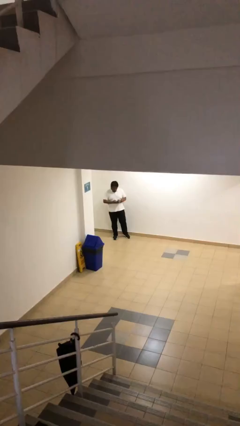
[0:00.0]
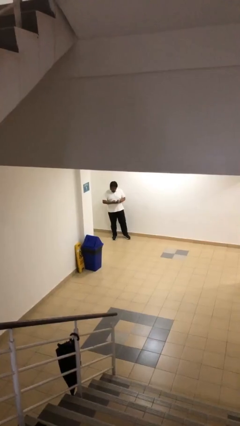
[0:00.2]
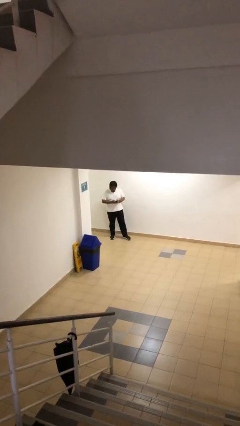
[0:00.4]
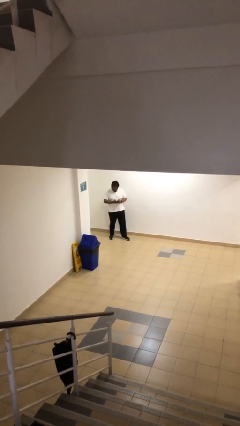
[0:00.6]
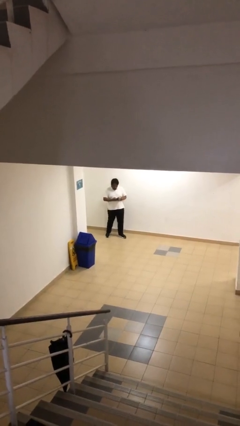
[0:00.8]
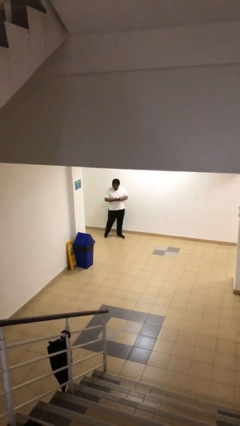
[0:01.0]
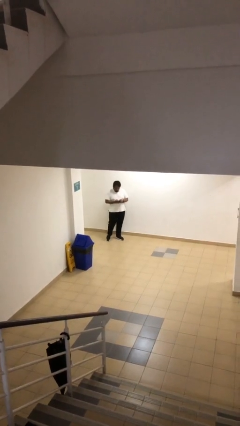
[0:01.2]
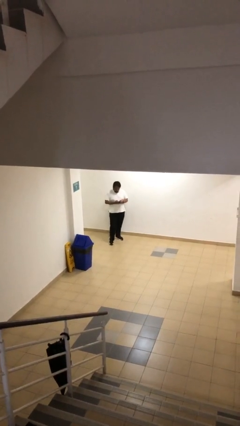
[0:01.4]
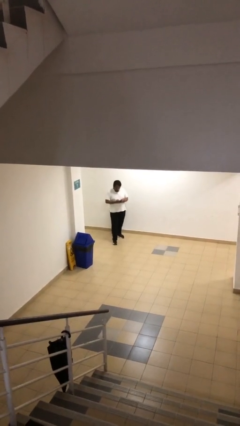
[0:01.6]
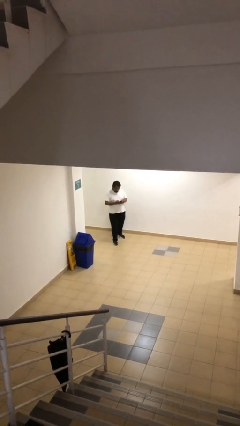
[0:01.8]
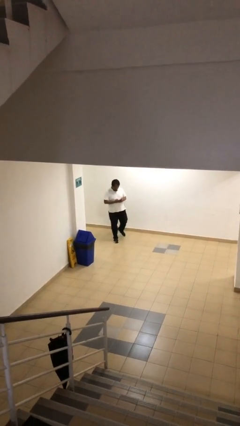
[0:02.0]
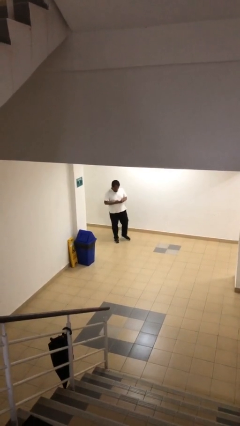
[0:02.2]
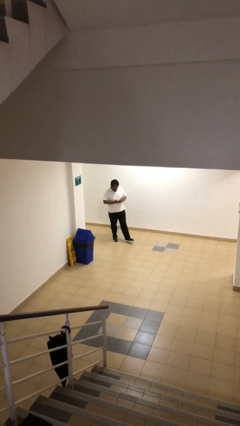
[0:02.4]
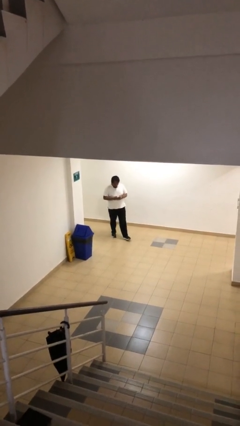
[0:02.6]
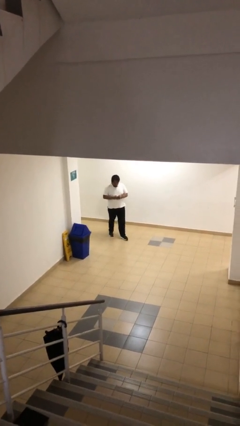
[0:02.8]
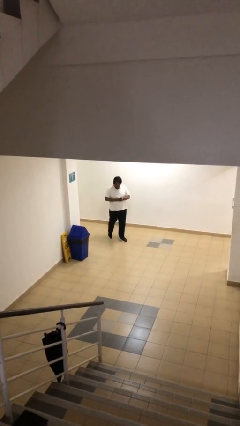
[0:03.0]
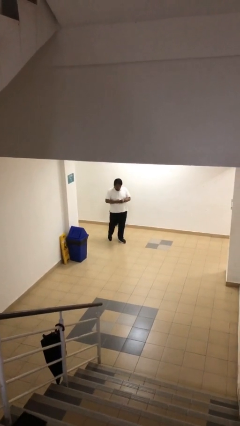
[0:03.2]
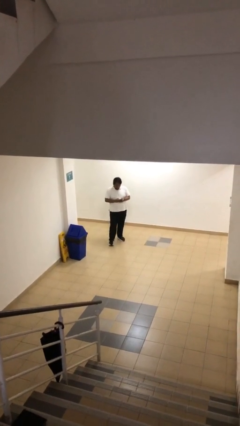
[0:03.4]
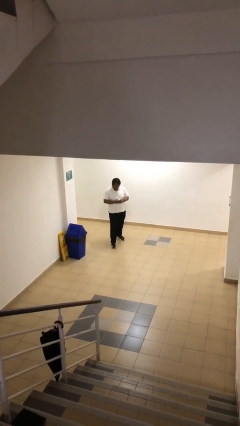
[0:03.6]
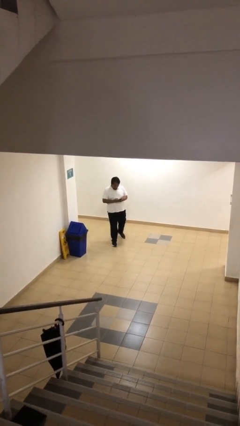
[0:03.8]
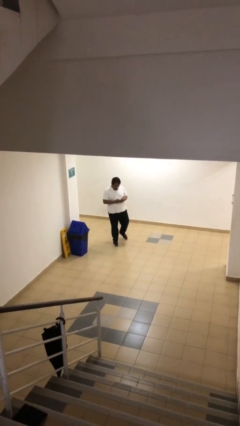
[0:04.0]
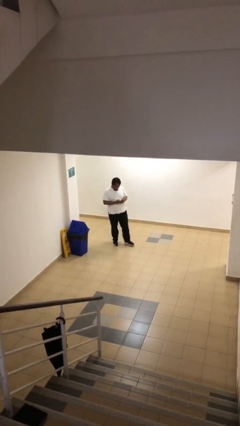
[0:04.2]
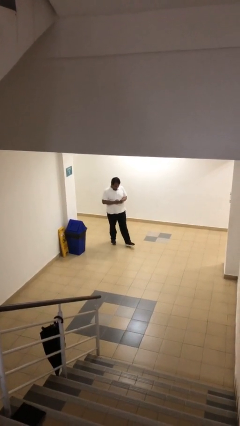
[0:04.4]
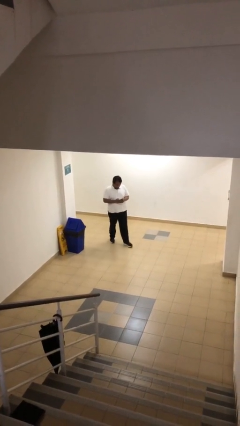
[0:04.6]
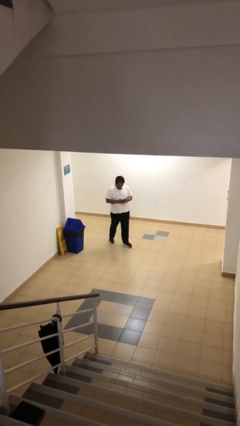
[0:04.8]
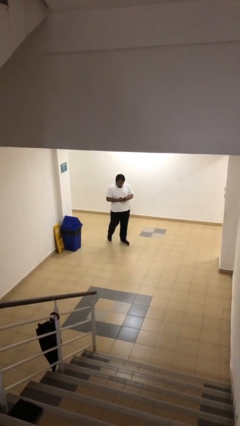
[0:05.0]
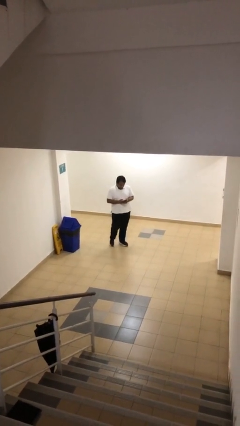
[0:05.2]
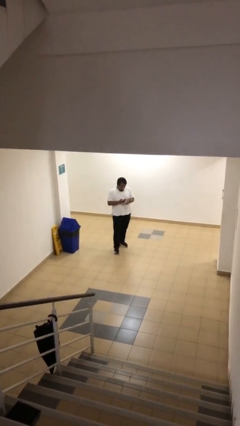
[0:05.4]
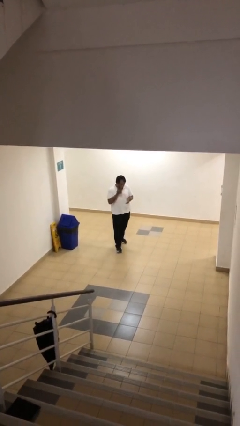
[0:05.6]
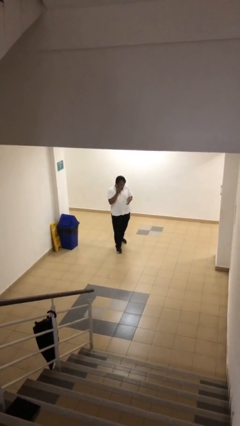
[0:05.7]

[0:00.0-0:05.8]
person texts on phone

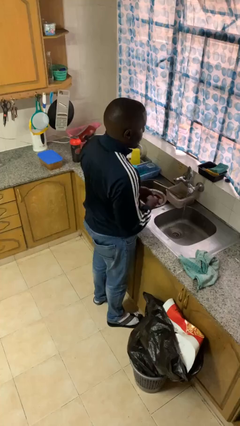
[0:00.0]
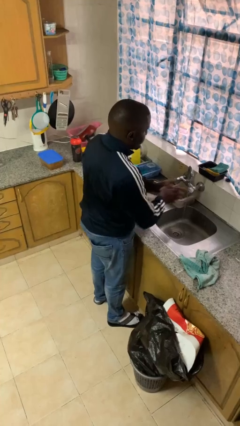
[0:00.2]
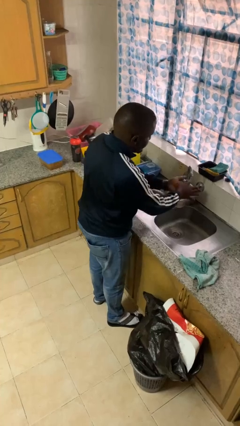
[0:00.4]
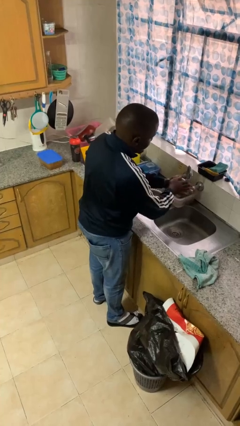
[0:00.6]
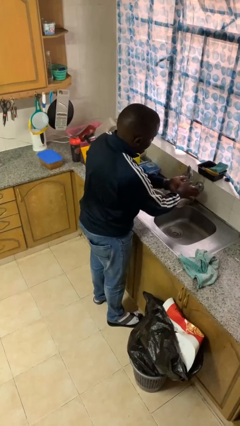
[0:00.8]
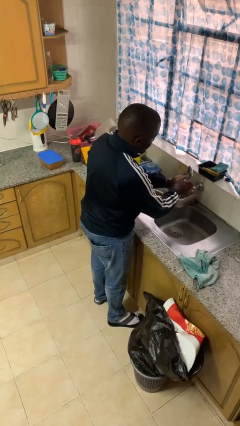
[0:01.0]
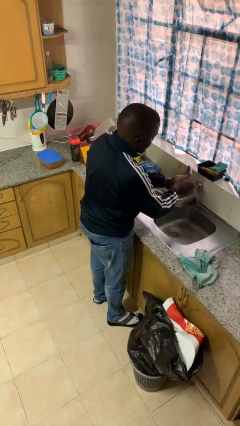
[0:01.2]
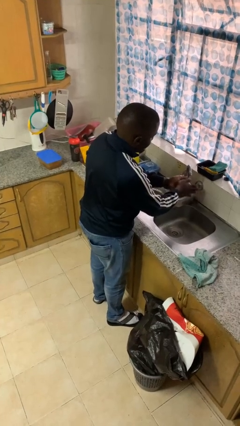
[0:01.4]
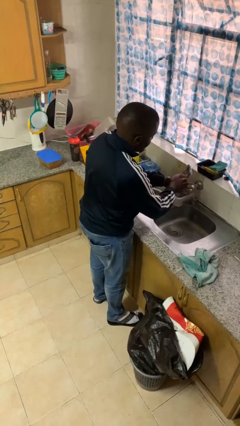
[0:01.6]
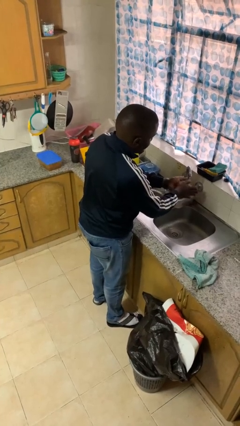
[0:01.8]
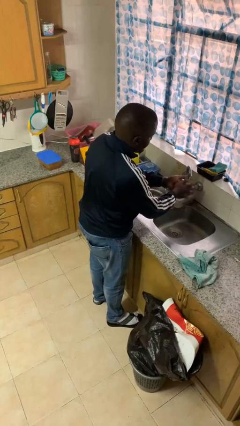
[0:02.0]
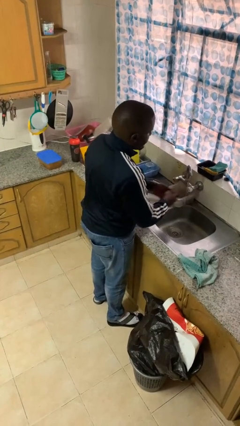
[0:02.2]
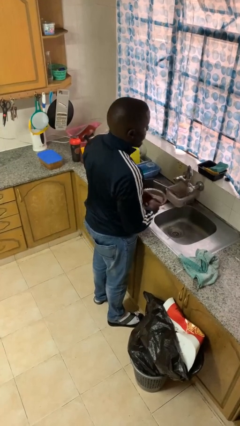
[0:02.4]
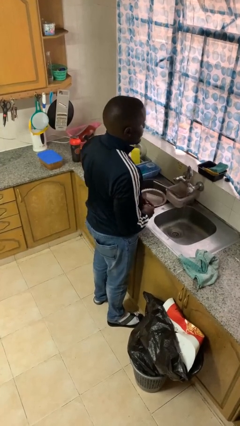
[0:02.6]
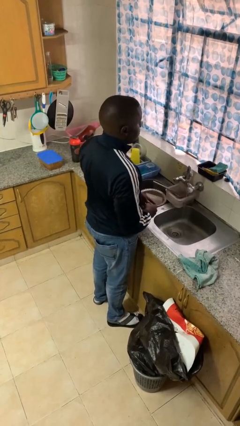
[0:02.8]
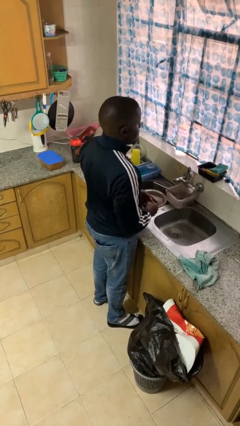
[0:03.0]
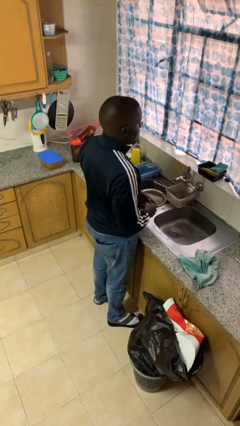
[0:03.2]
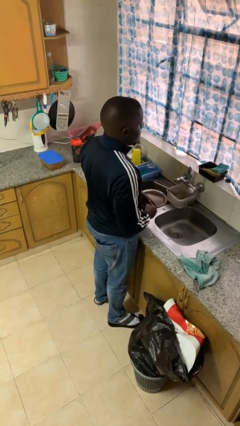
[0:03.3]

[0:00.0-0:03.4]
person washes hands

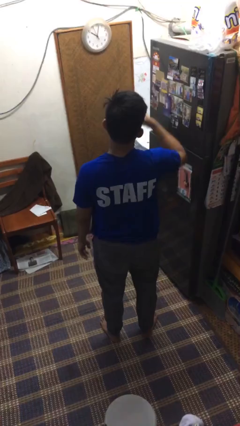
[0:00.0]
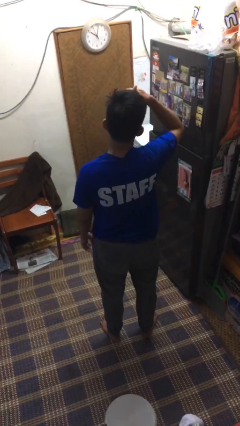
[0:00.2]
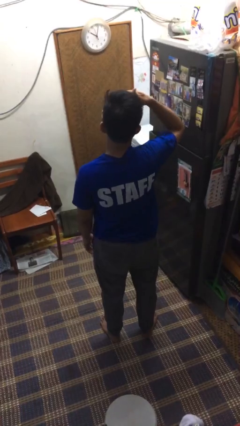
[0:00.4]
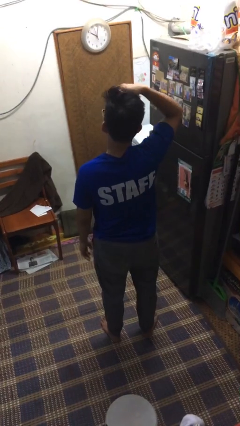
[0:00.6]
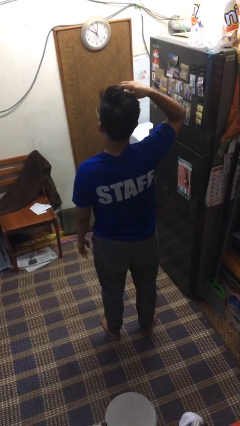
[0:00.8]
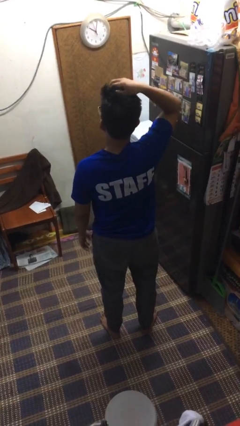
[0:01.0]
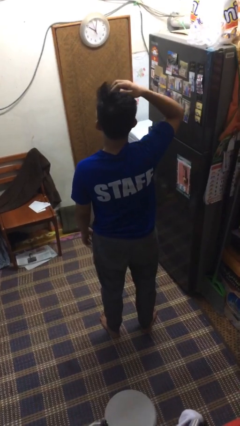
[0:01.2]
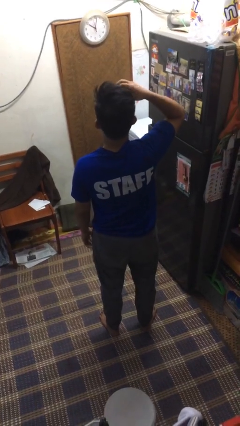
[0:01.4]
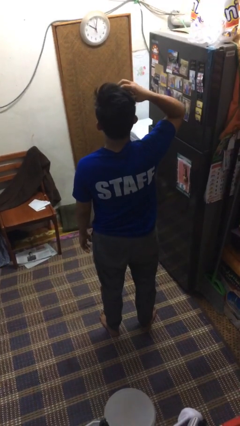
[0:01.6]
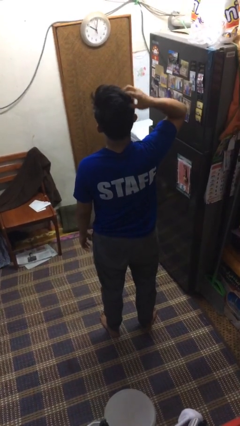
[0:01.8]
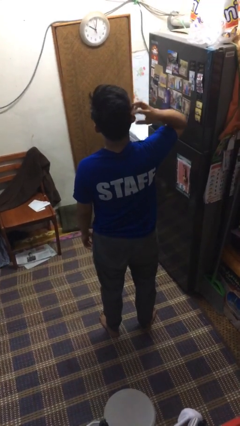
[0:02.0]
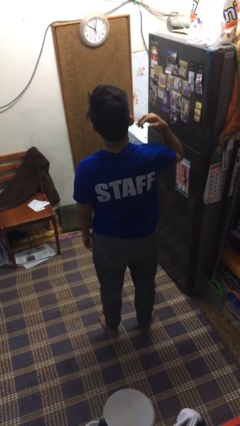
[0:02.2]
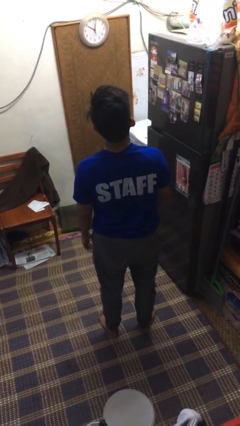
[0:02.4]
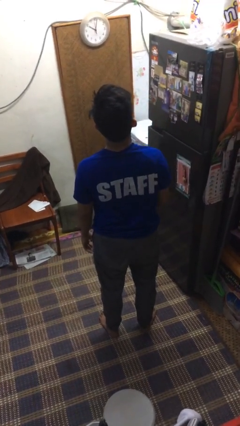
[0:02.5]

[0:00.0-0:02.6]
person scratches face

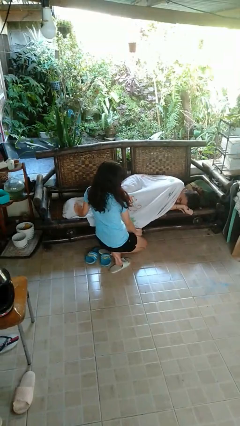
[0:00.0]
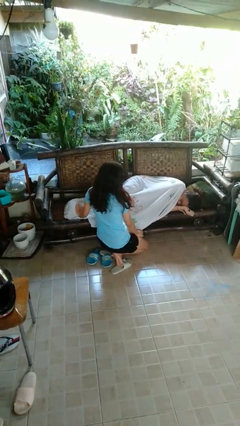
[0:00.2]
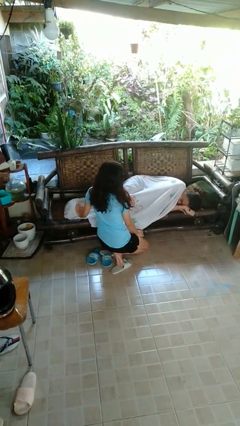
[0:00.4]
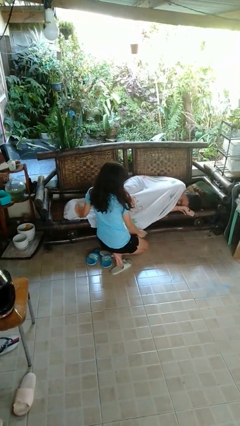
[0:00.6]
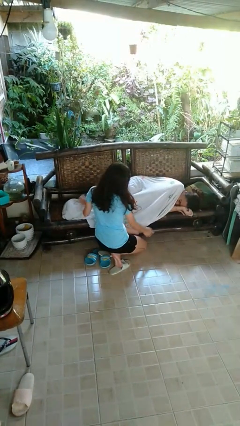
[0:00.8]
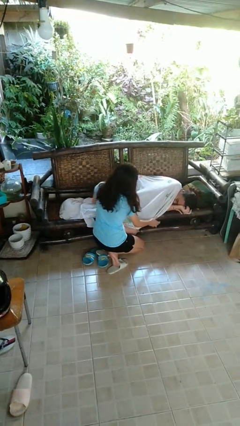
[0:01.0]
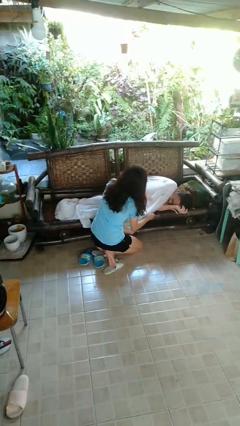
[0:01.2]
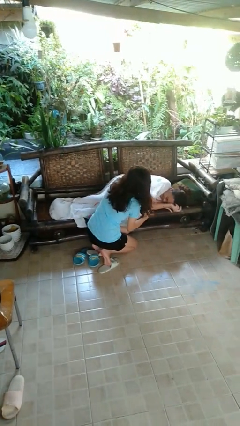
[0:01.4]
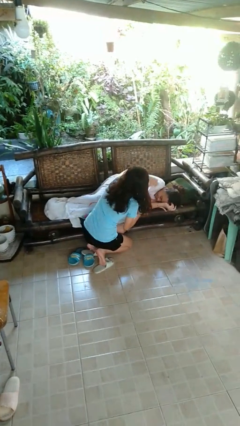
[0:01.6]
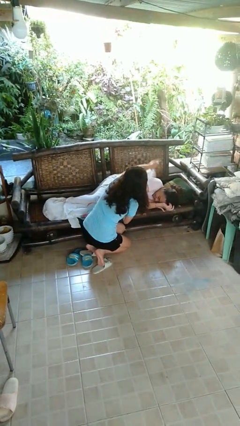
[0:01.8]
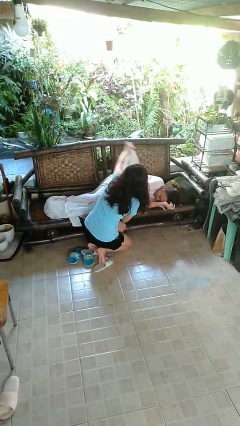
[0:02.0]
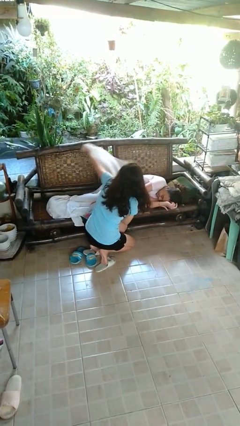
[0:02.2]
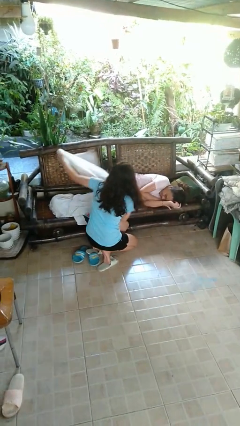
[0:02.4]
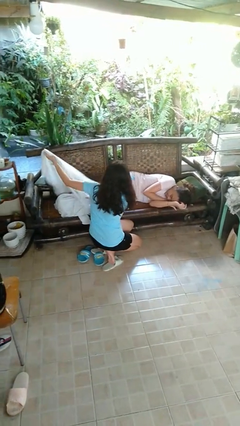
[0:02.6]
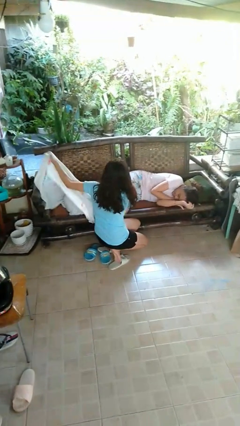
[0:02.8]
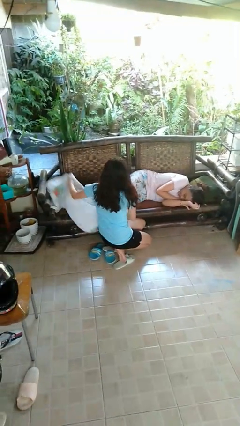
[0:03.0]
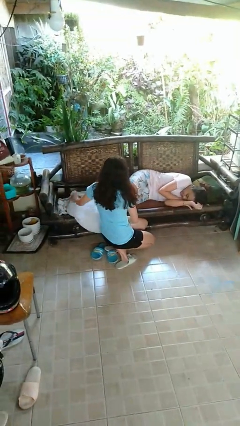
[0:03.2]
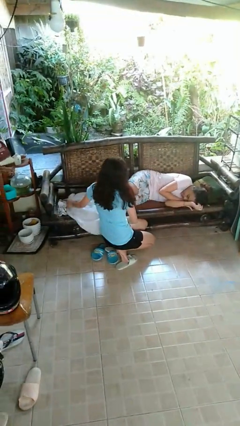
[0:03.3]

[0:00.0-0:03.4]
person uncovers friend with blanket

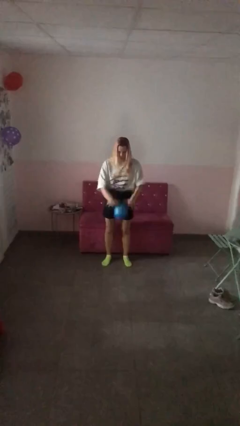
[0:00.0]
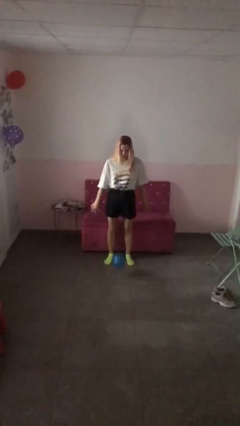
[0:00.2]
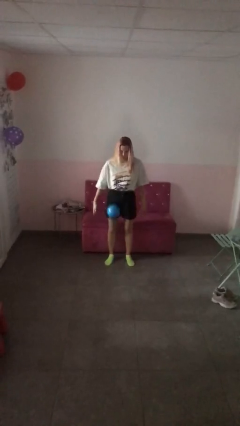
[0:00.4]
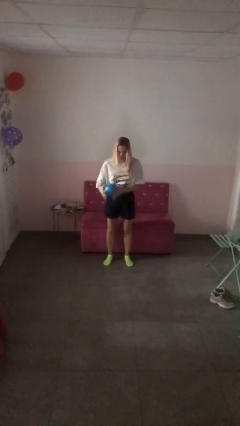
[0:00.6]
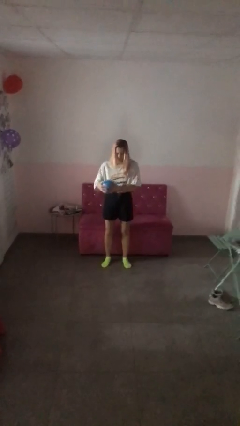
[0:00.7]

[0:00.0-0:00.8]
person bounces ball on floor

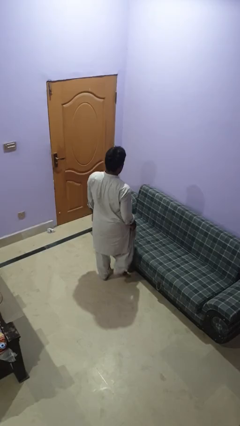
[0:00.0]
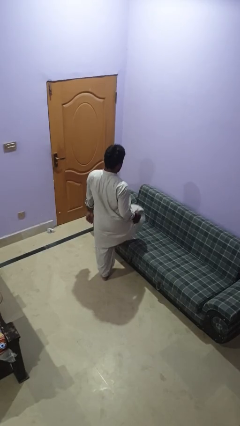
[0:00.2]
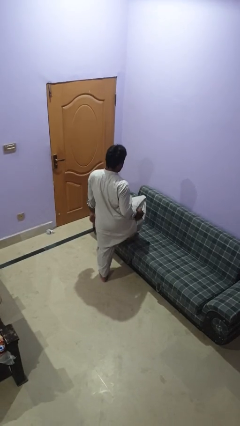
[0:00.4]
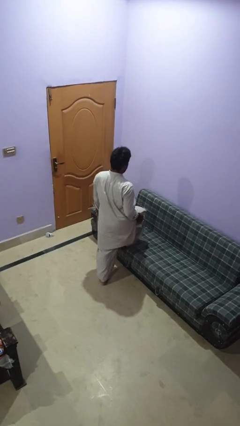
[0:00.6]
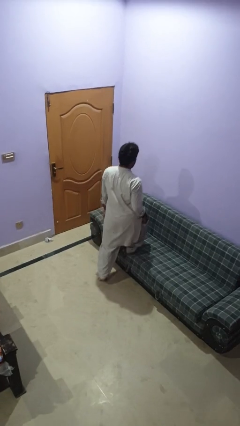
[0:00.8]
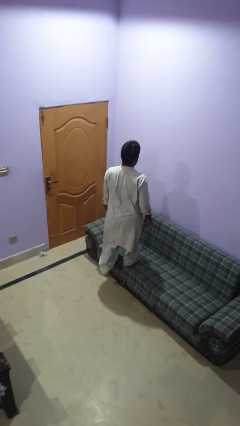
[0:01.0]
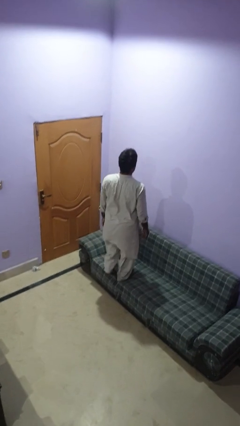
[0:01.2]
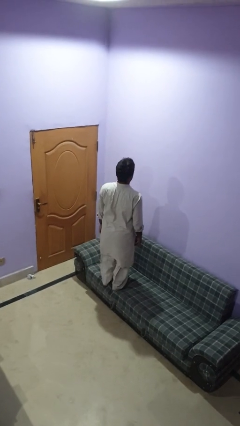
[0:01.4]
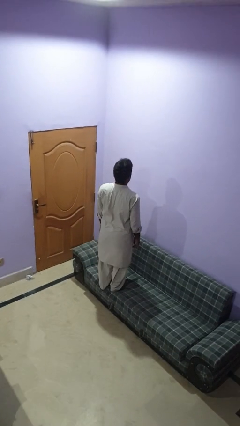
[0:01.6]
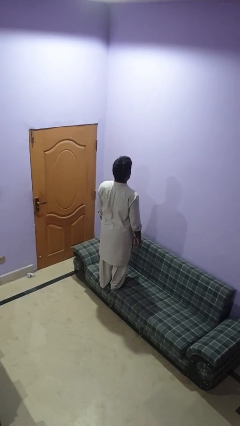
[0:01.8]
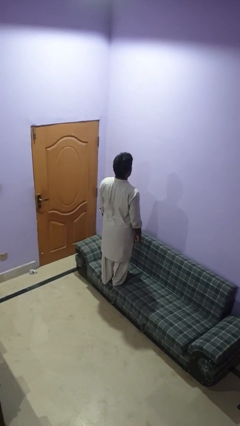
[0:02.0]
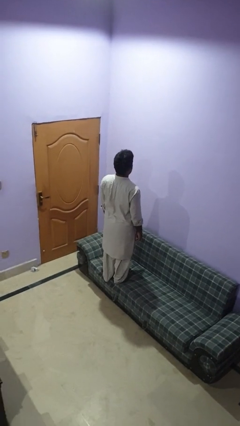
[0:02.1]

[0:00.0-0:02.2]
person climbs on couch
